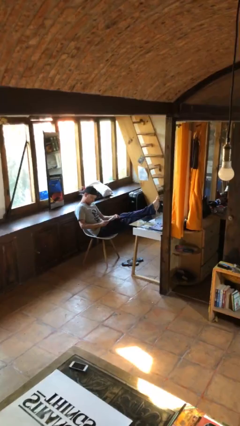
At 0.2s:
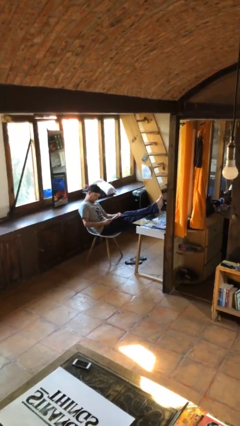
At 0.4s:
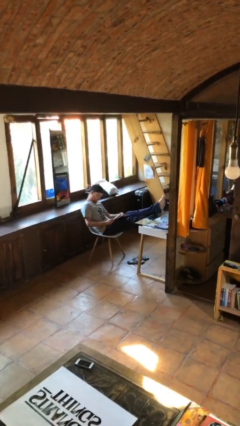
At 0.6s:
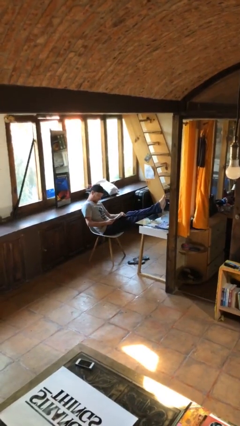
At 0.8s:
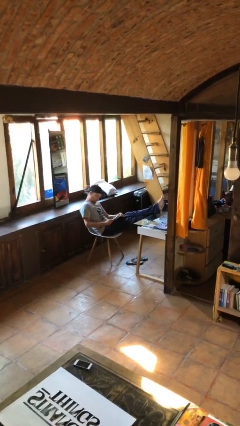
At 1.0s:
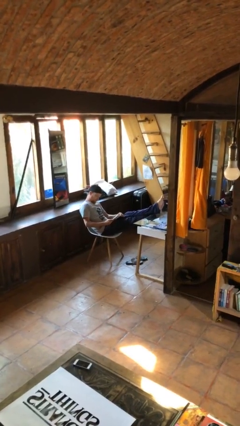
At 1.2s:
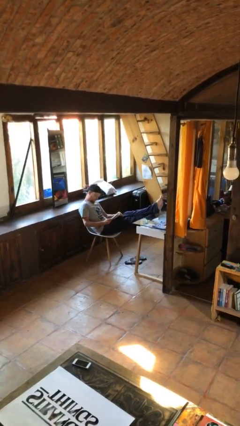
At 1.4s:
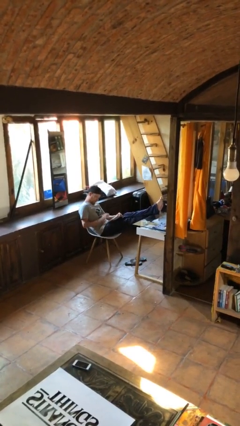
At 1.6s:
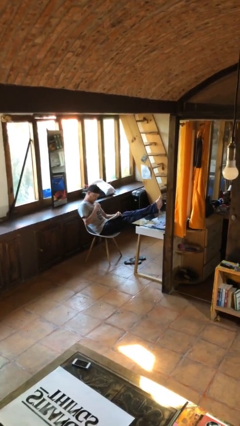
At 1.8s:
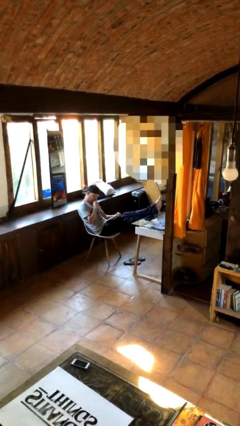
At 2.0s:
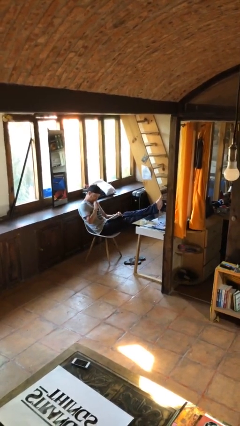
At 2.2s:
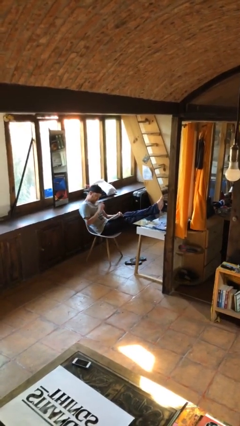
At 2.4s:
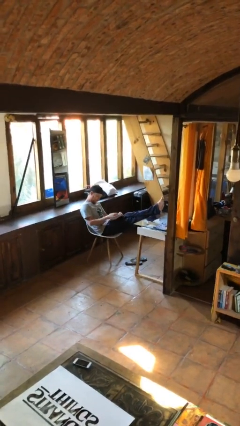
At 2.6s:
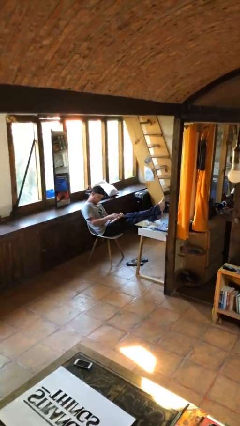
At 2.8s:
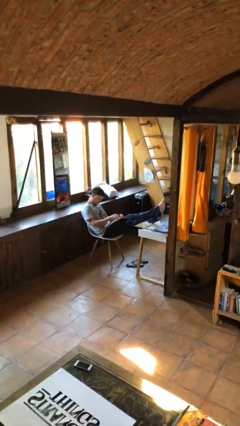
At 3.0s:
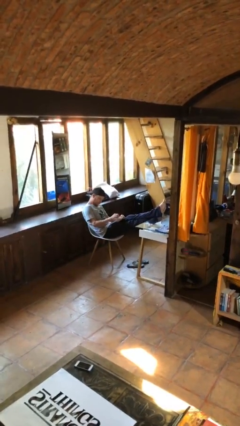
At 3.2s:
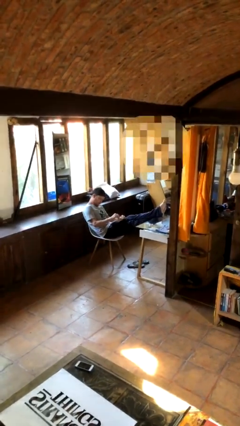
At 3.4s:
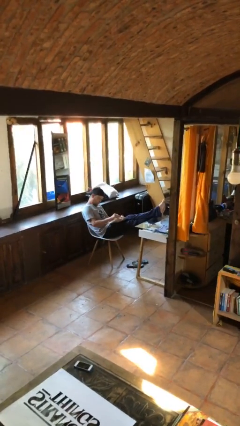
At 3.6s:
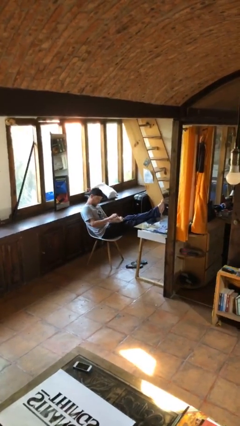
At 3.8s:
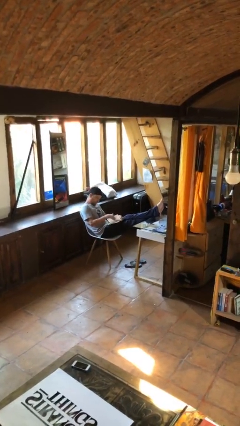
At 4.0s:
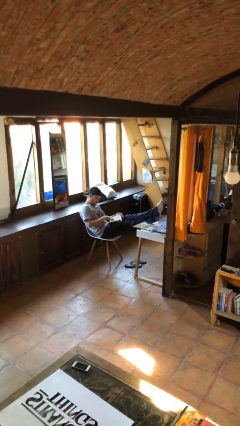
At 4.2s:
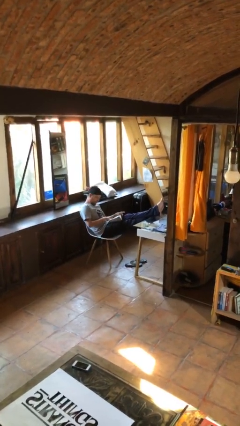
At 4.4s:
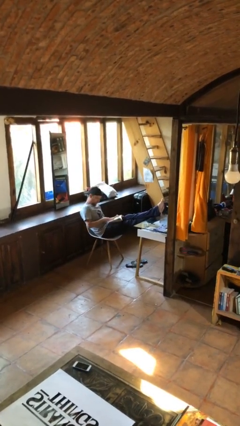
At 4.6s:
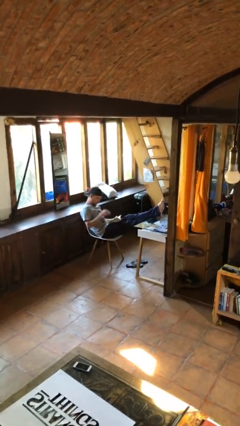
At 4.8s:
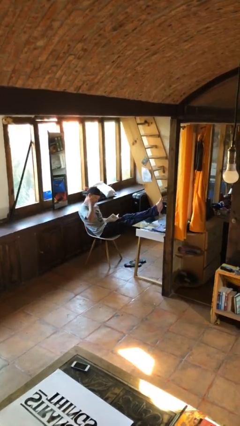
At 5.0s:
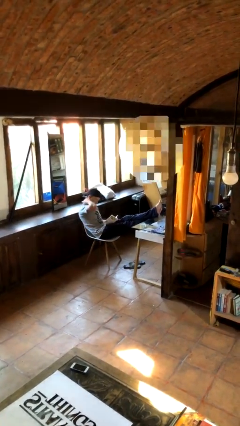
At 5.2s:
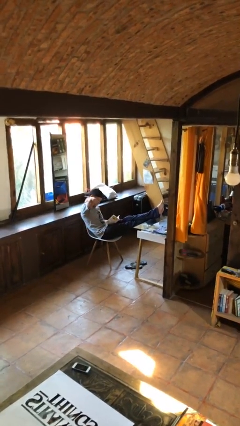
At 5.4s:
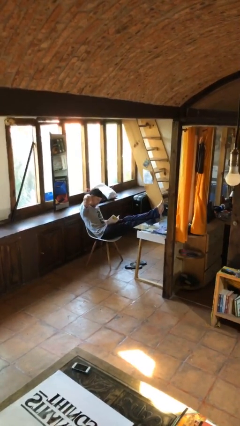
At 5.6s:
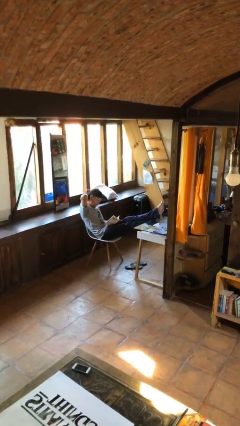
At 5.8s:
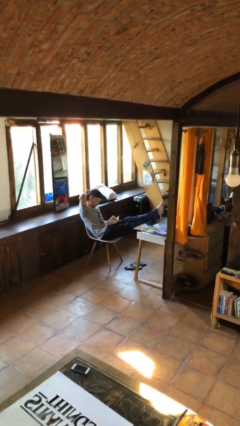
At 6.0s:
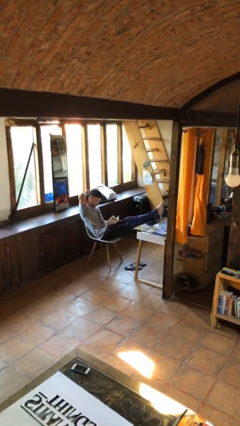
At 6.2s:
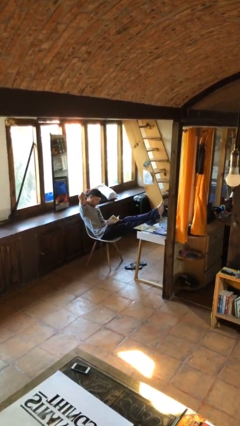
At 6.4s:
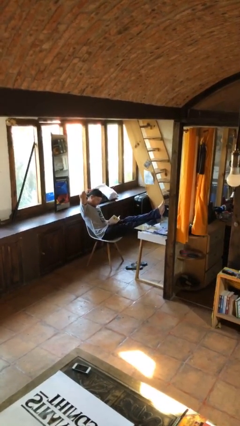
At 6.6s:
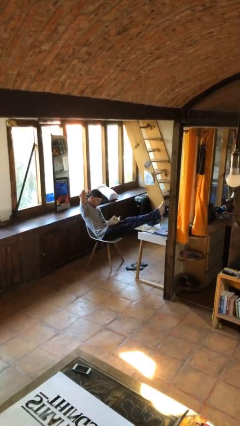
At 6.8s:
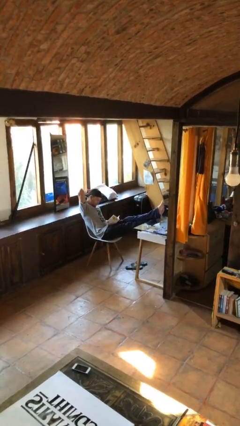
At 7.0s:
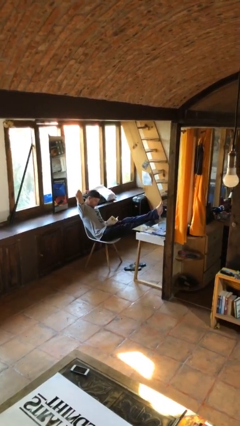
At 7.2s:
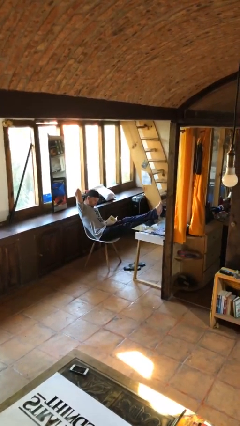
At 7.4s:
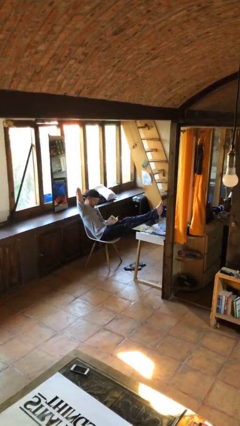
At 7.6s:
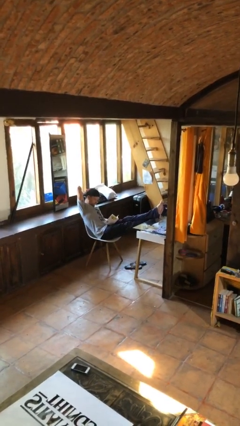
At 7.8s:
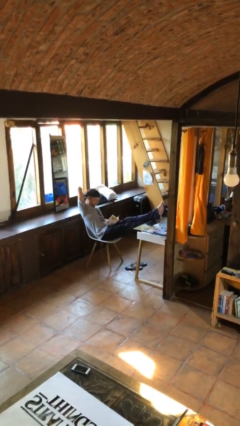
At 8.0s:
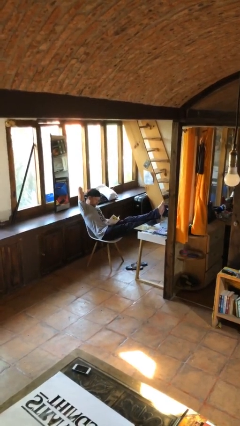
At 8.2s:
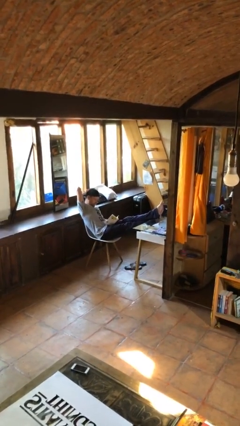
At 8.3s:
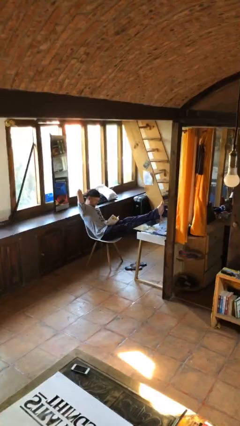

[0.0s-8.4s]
person reads document

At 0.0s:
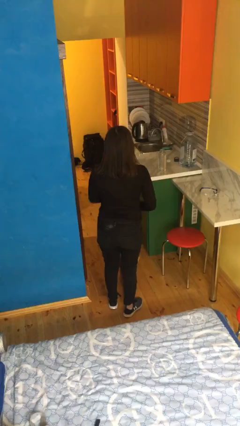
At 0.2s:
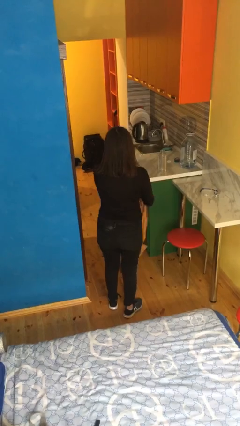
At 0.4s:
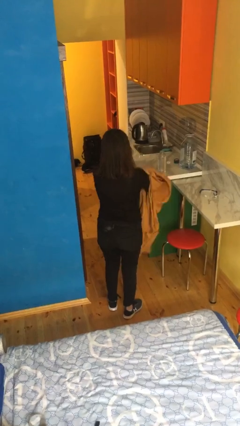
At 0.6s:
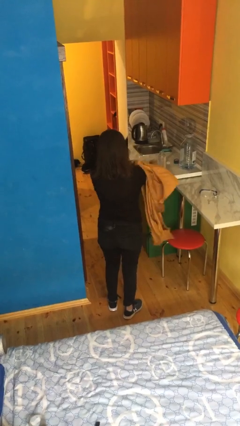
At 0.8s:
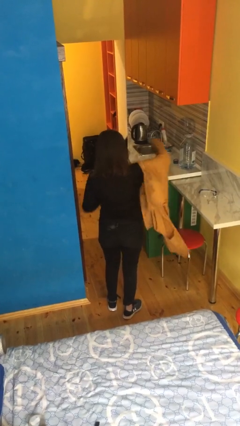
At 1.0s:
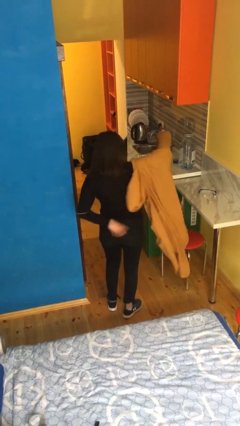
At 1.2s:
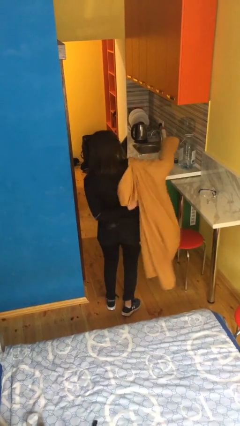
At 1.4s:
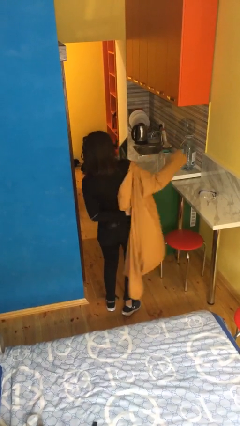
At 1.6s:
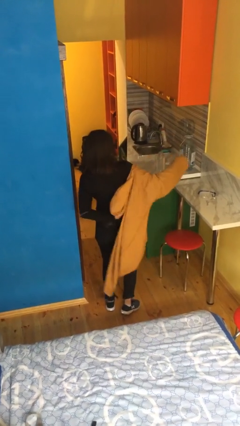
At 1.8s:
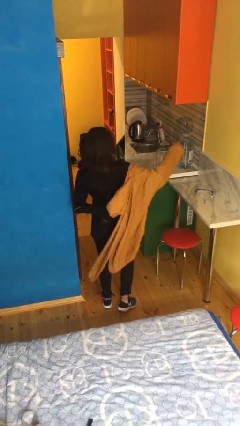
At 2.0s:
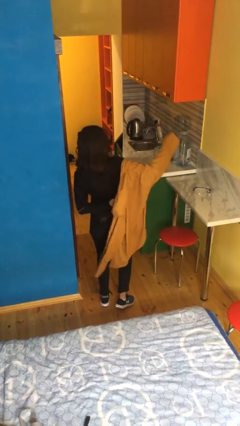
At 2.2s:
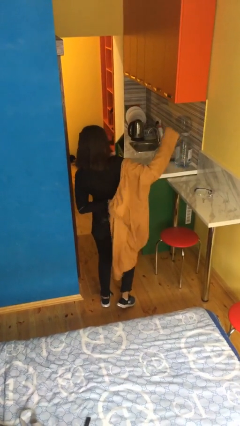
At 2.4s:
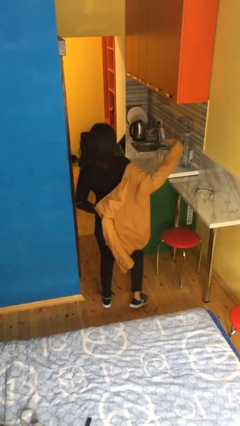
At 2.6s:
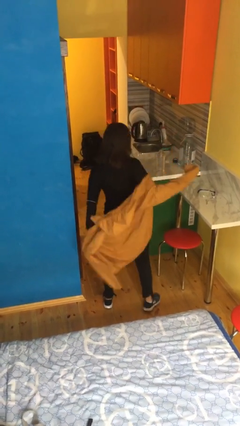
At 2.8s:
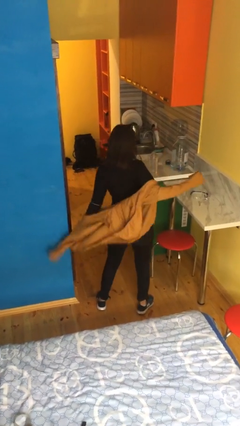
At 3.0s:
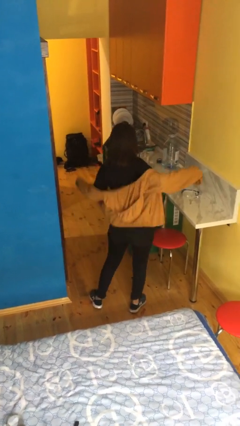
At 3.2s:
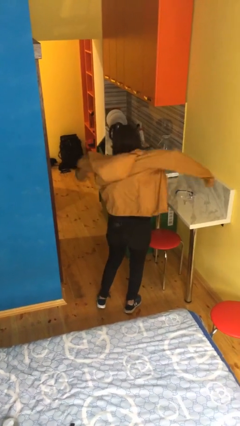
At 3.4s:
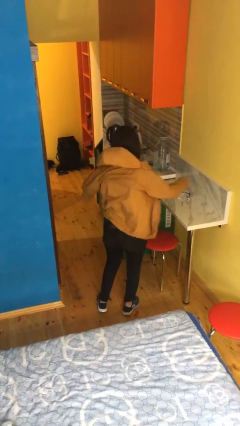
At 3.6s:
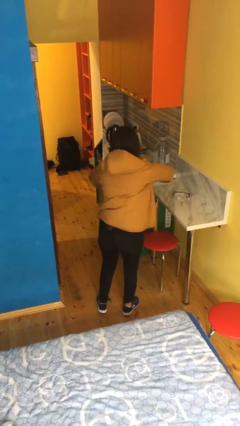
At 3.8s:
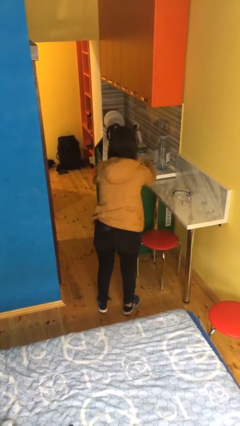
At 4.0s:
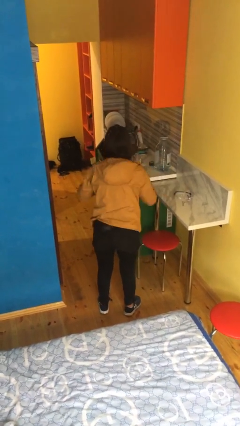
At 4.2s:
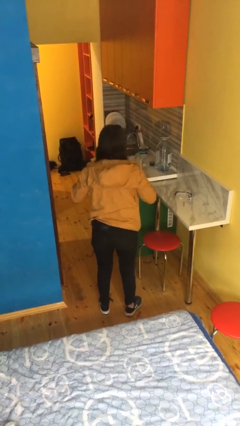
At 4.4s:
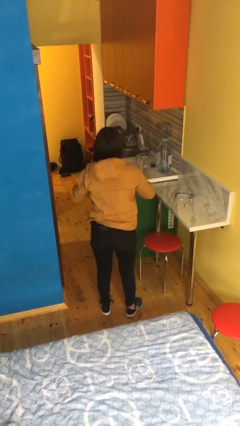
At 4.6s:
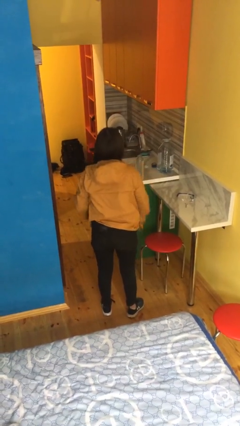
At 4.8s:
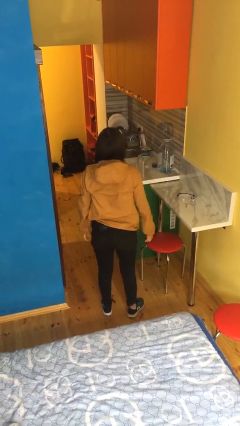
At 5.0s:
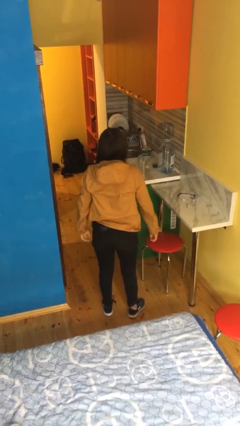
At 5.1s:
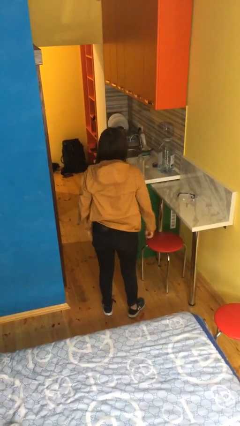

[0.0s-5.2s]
person puts on jacket

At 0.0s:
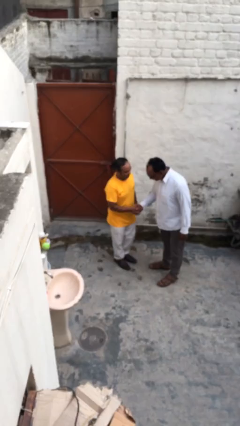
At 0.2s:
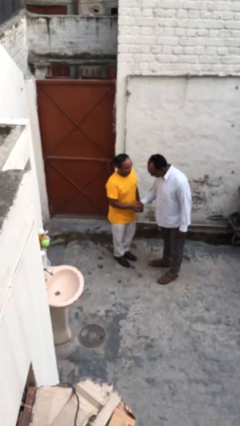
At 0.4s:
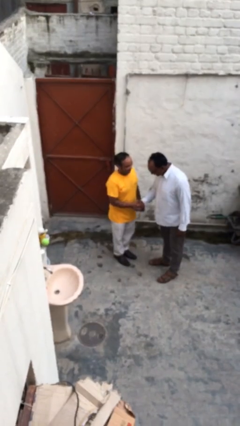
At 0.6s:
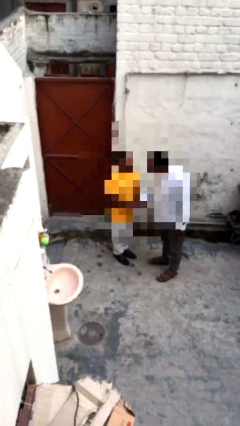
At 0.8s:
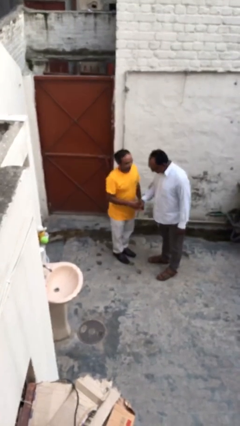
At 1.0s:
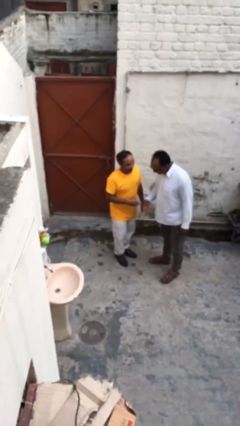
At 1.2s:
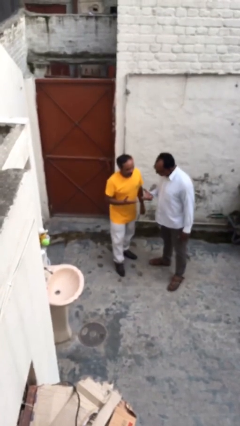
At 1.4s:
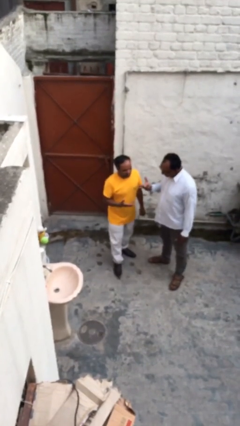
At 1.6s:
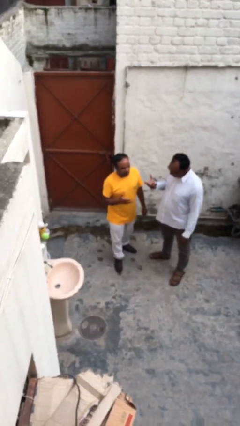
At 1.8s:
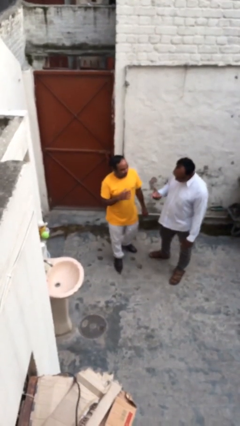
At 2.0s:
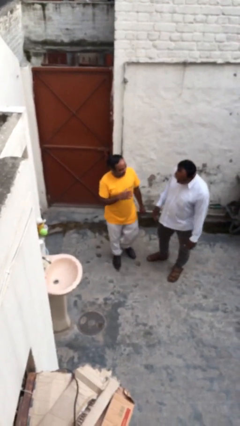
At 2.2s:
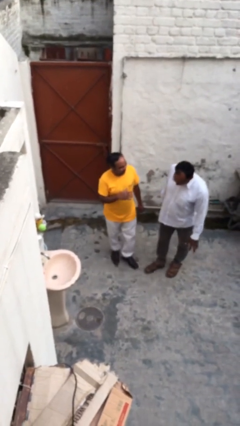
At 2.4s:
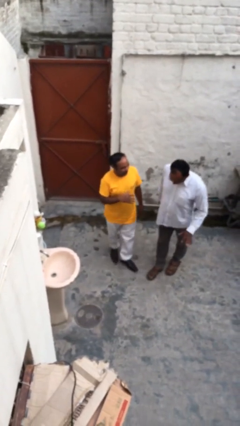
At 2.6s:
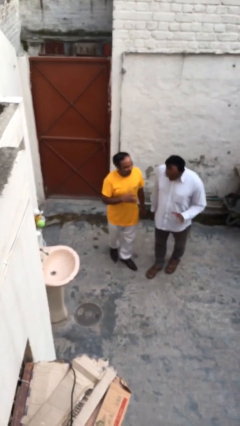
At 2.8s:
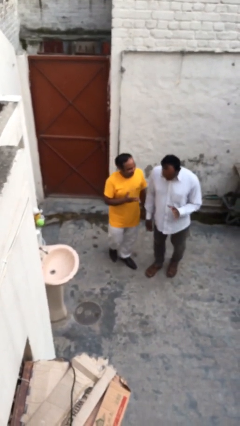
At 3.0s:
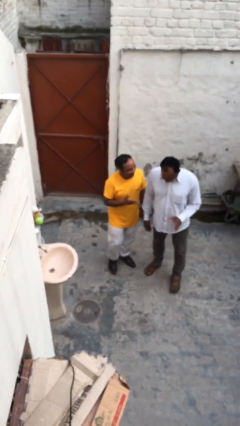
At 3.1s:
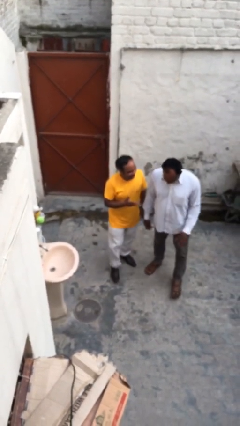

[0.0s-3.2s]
person talks to person

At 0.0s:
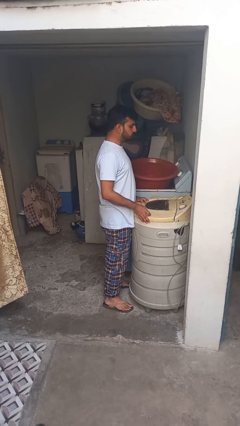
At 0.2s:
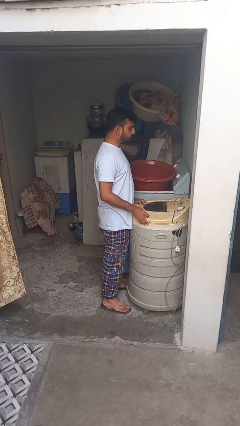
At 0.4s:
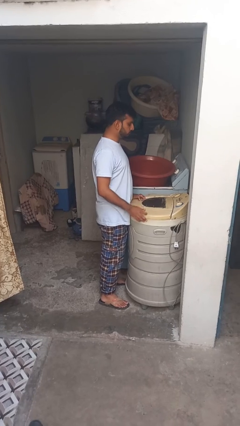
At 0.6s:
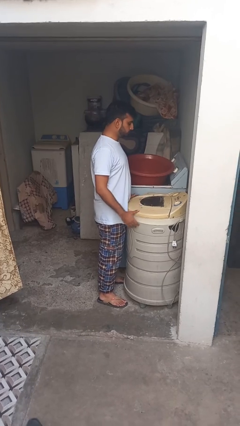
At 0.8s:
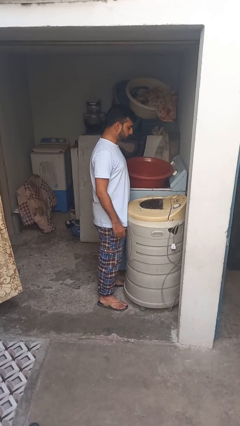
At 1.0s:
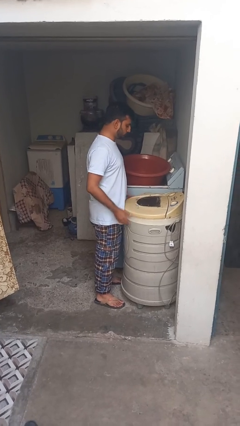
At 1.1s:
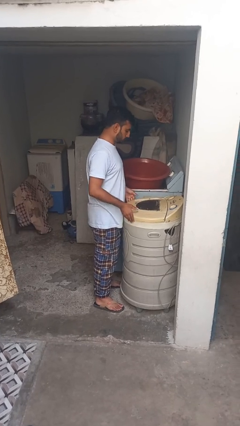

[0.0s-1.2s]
person unloads clotheswasher
